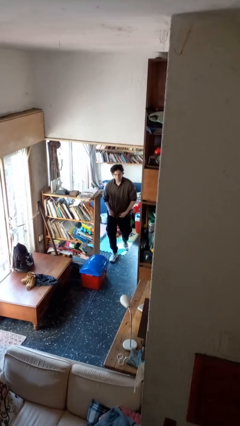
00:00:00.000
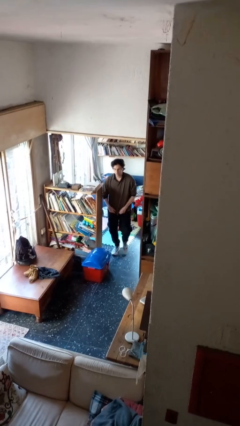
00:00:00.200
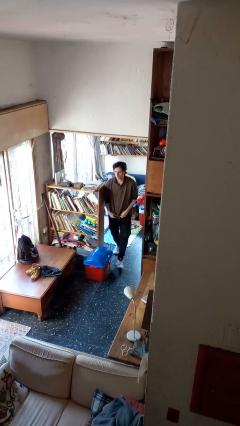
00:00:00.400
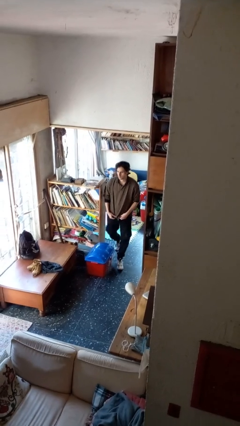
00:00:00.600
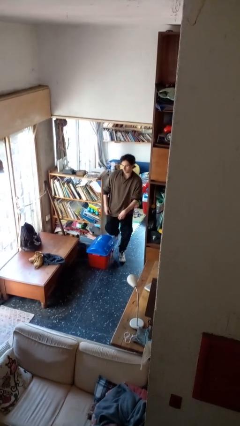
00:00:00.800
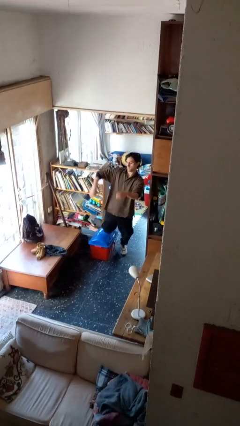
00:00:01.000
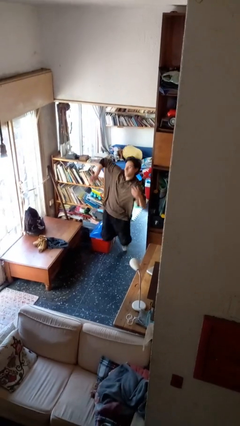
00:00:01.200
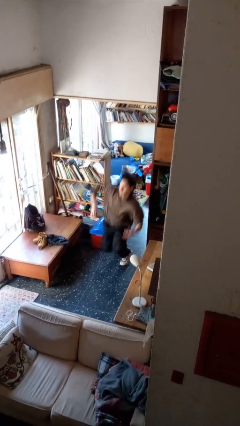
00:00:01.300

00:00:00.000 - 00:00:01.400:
person trips on object on floor

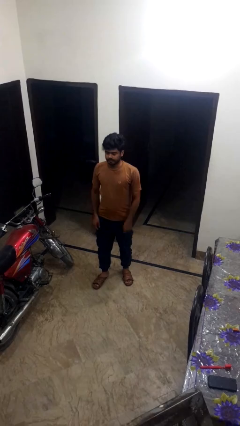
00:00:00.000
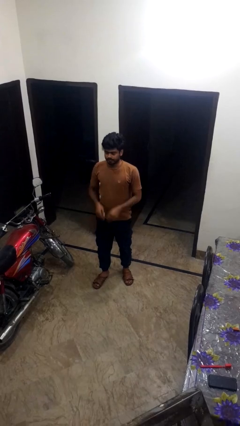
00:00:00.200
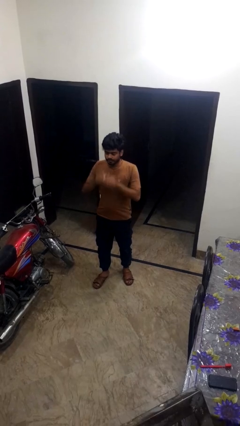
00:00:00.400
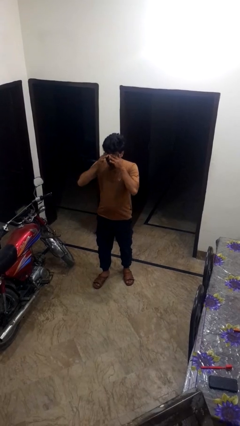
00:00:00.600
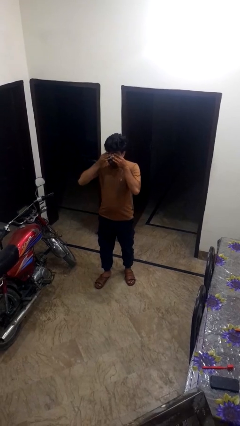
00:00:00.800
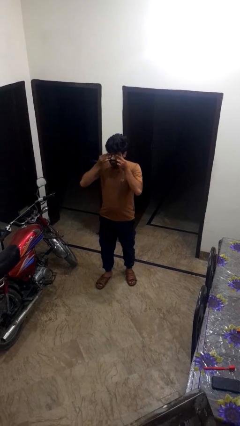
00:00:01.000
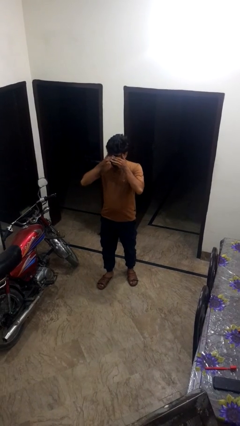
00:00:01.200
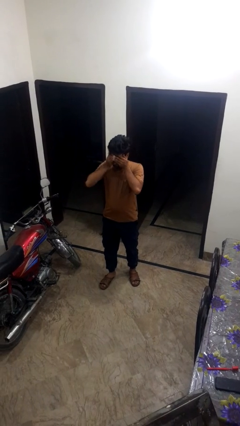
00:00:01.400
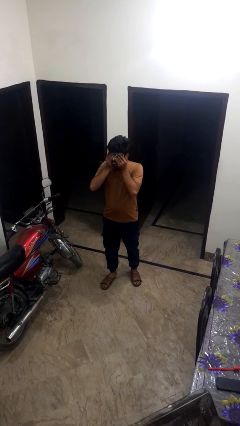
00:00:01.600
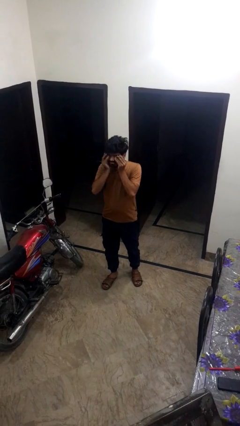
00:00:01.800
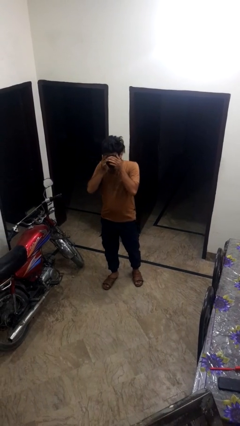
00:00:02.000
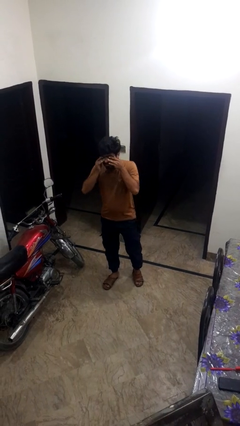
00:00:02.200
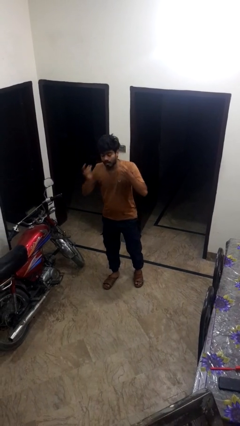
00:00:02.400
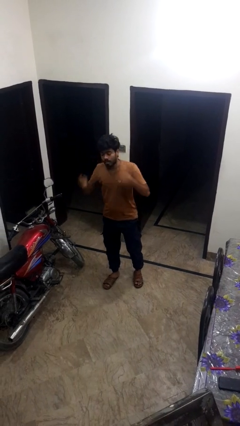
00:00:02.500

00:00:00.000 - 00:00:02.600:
person rubs eyes

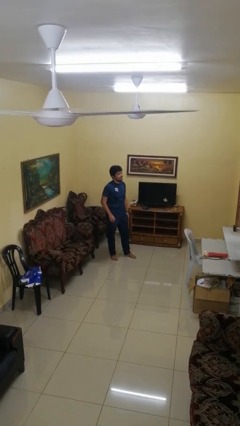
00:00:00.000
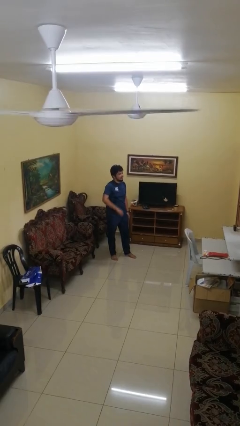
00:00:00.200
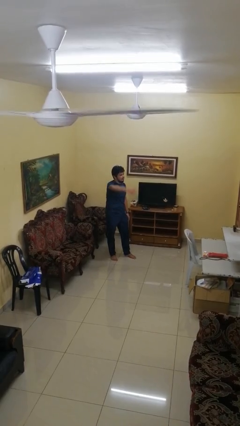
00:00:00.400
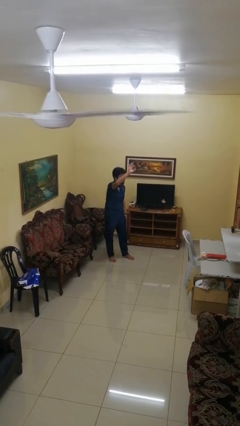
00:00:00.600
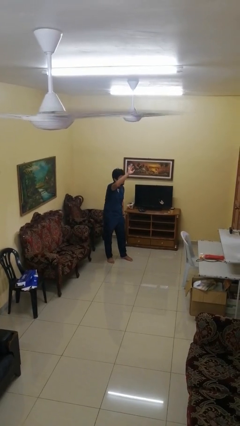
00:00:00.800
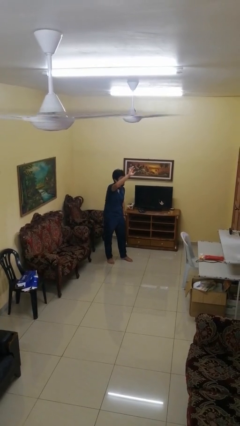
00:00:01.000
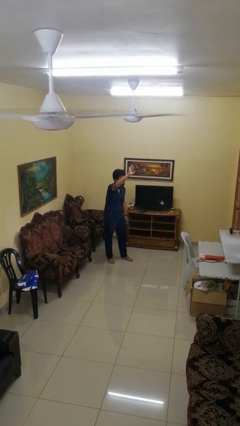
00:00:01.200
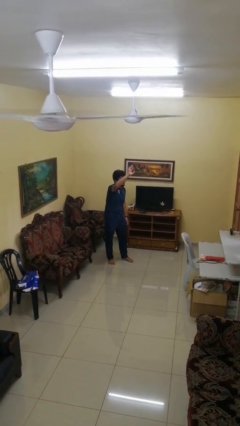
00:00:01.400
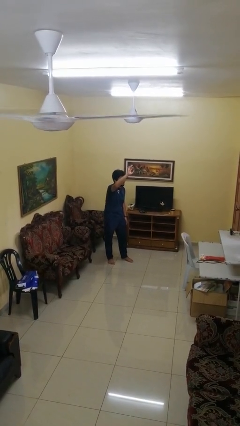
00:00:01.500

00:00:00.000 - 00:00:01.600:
person gestures swipe up

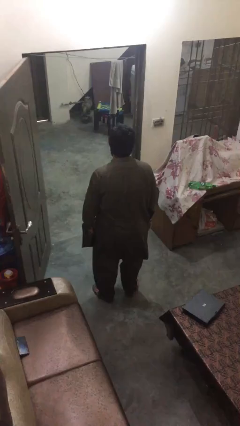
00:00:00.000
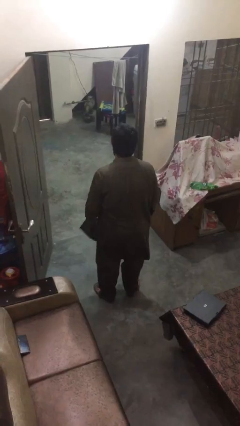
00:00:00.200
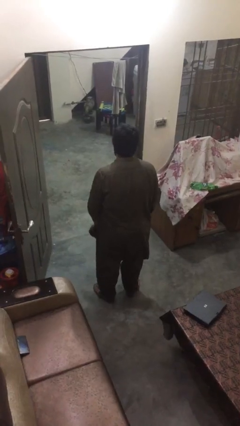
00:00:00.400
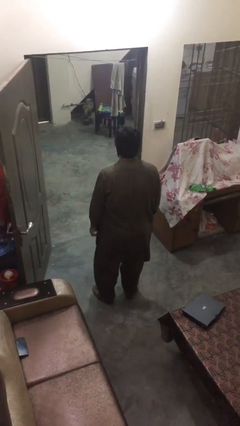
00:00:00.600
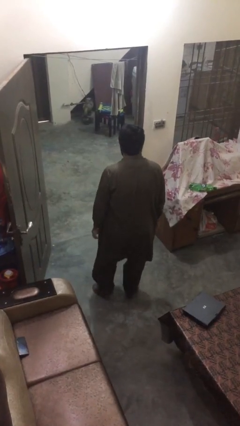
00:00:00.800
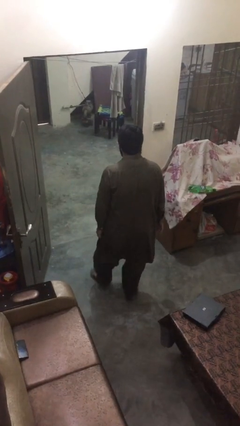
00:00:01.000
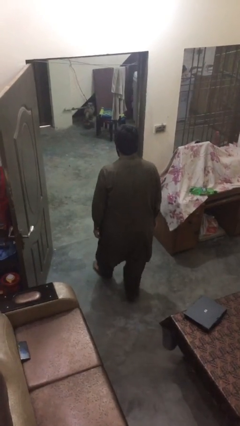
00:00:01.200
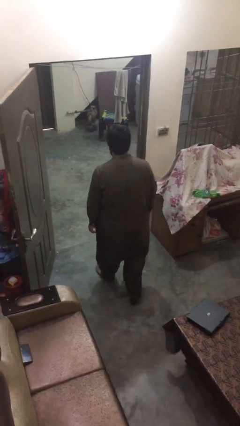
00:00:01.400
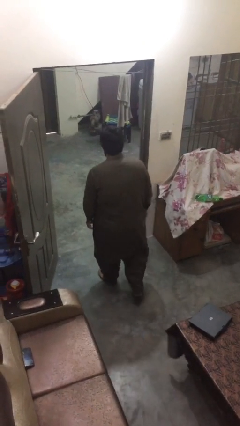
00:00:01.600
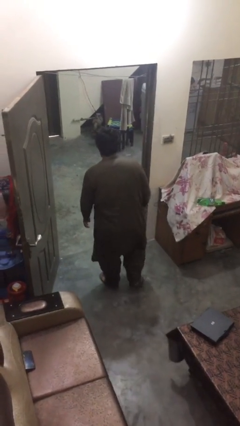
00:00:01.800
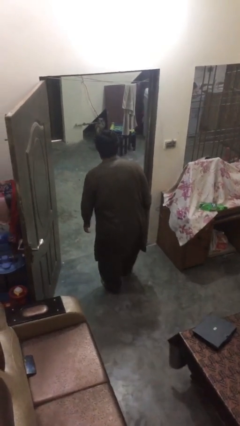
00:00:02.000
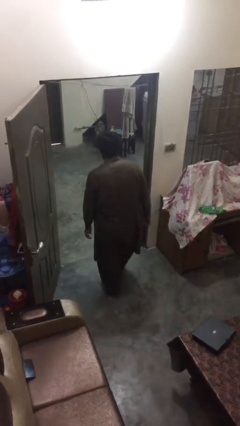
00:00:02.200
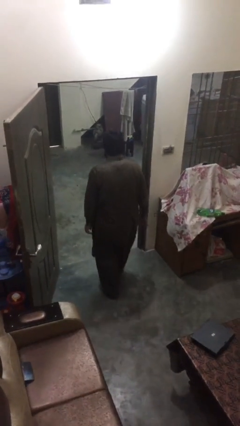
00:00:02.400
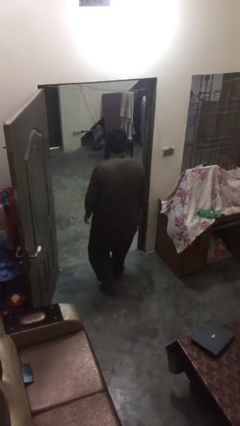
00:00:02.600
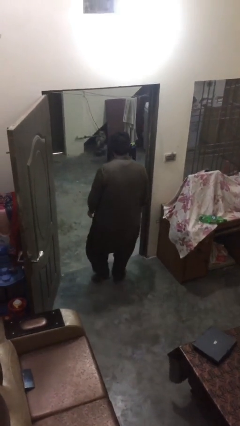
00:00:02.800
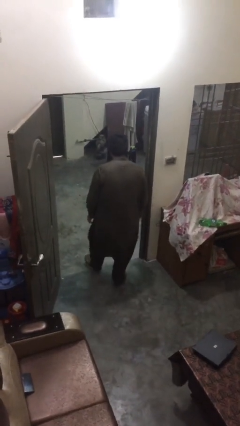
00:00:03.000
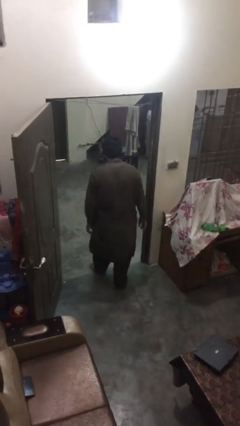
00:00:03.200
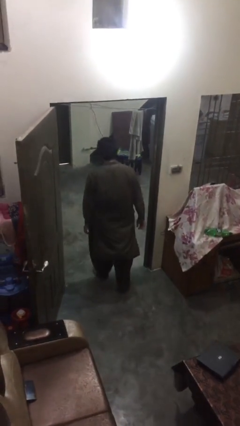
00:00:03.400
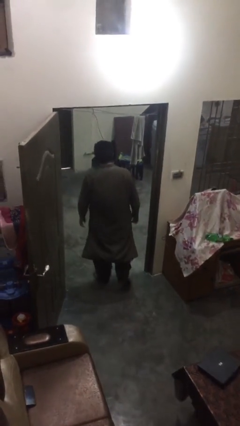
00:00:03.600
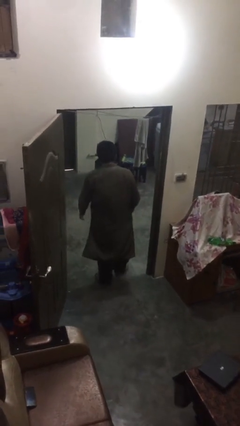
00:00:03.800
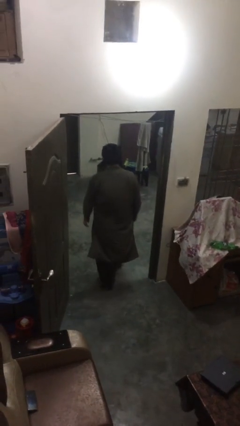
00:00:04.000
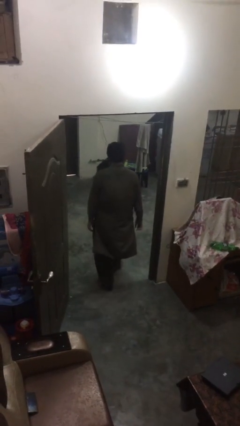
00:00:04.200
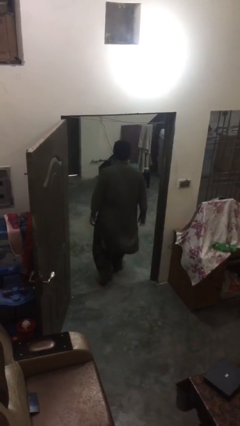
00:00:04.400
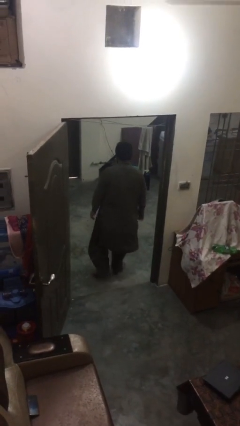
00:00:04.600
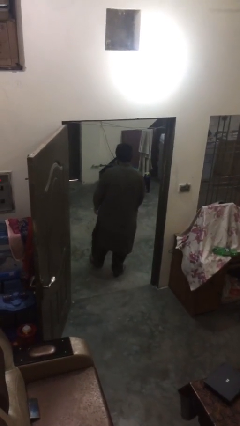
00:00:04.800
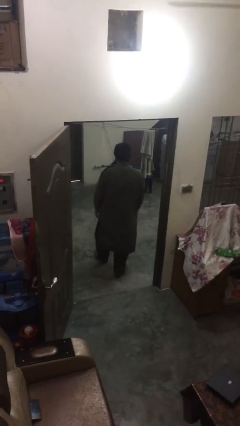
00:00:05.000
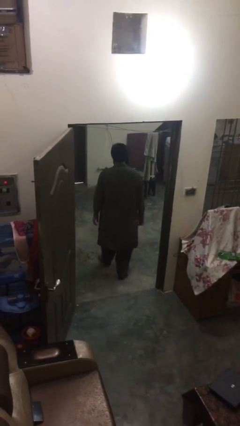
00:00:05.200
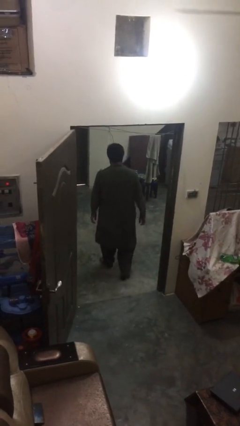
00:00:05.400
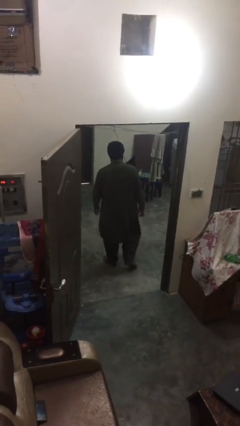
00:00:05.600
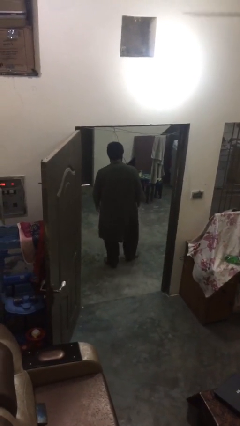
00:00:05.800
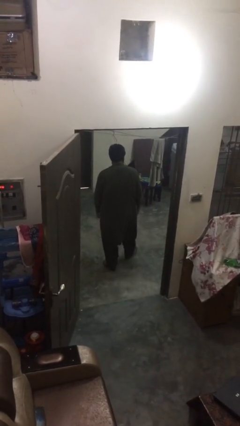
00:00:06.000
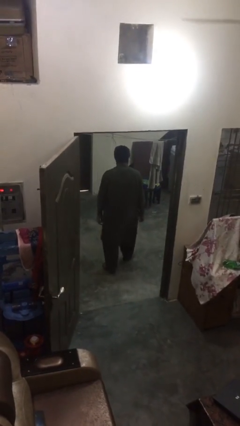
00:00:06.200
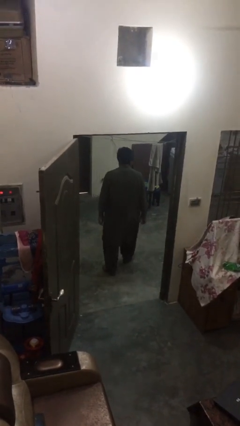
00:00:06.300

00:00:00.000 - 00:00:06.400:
person exits scene through structure

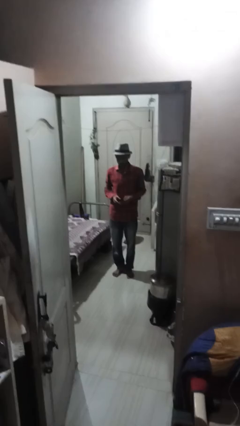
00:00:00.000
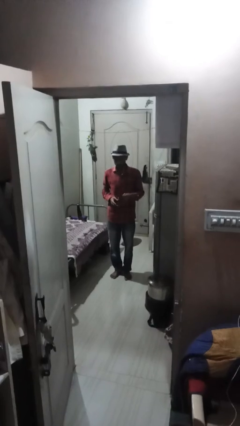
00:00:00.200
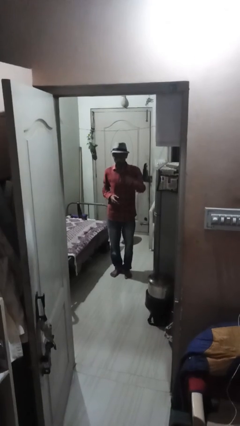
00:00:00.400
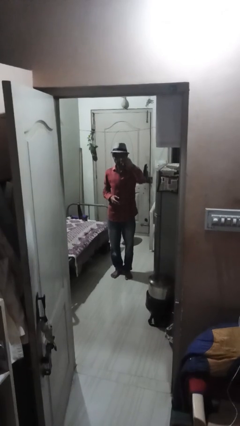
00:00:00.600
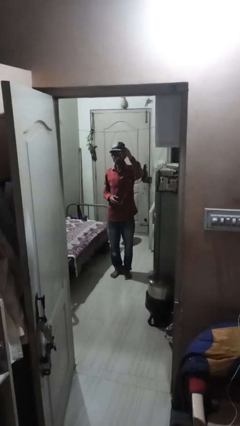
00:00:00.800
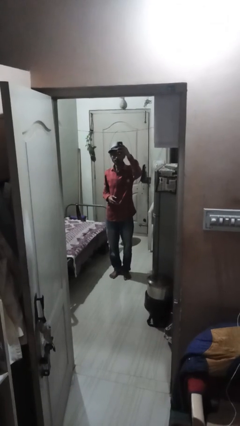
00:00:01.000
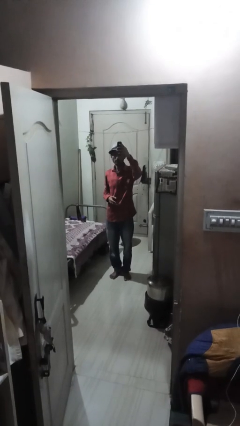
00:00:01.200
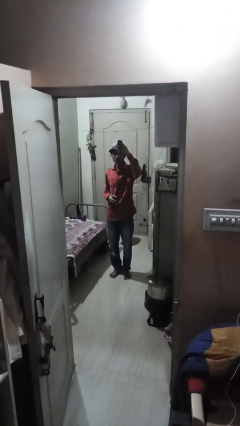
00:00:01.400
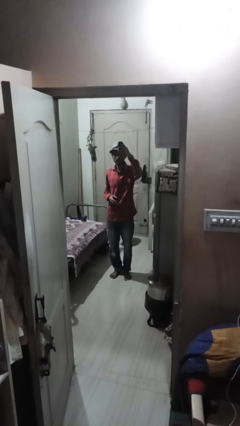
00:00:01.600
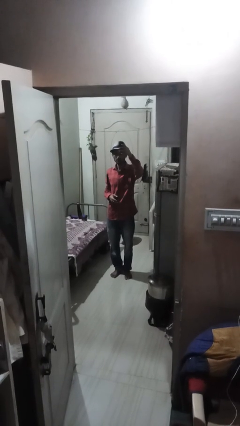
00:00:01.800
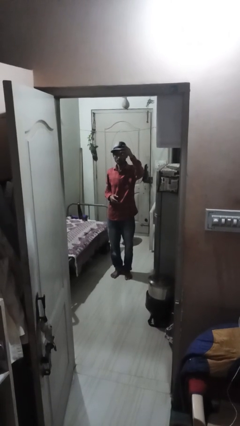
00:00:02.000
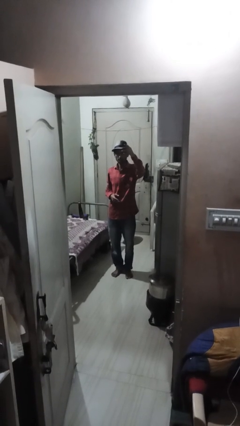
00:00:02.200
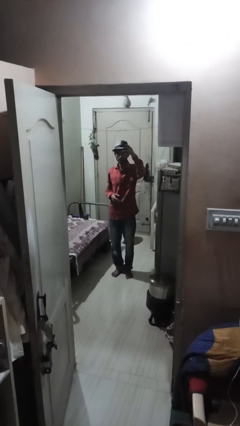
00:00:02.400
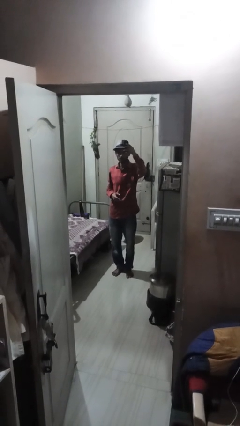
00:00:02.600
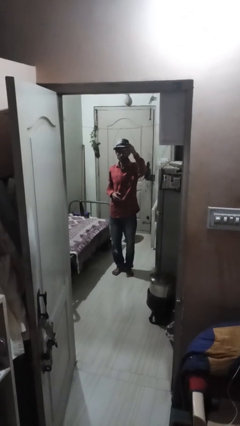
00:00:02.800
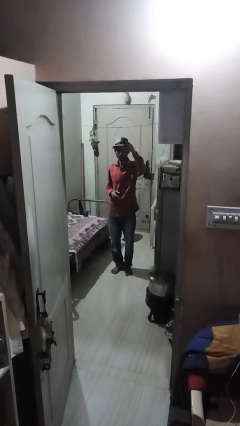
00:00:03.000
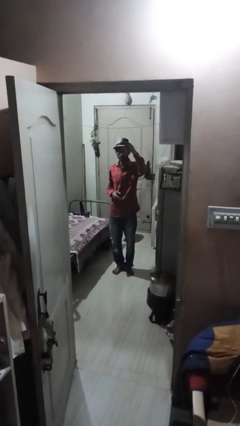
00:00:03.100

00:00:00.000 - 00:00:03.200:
person takes selfie

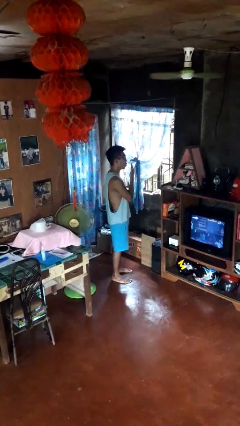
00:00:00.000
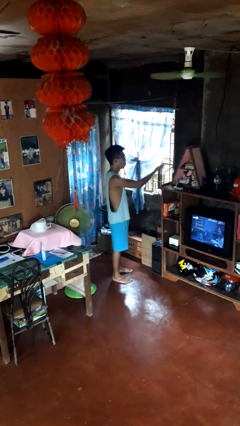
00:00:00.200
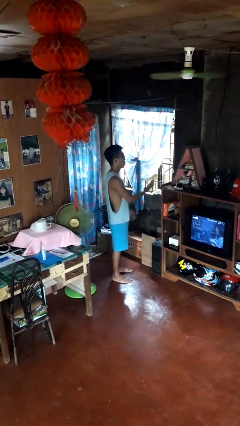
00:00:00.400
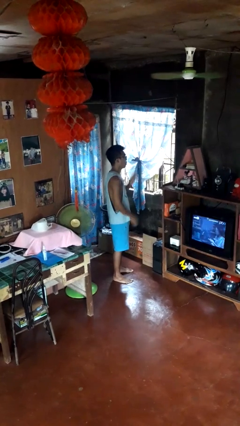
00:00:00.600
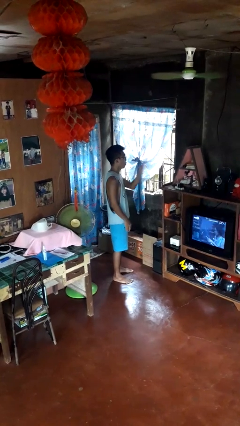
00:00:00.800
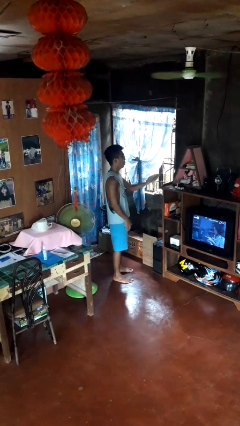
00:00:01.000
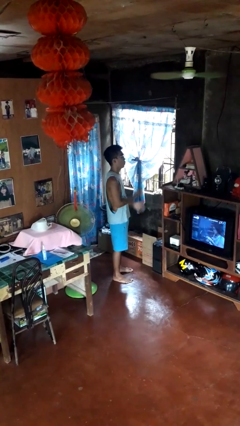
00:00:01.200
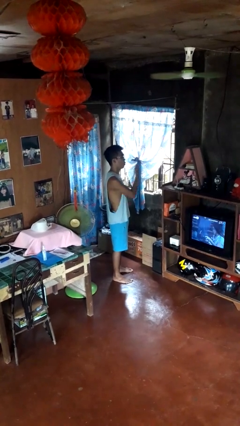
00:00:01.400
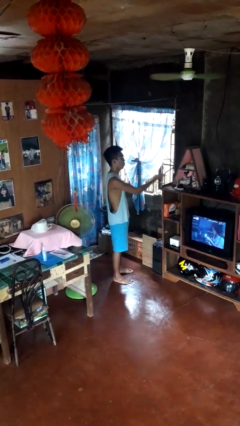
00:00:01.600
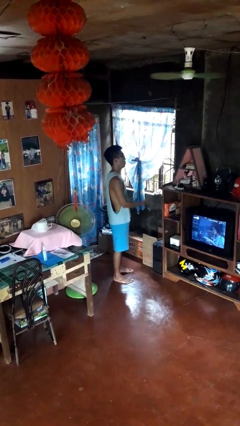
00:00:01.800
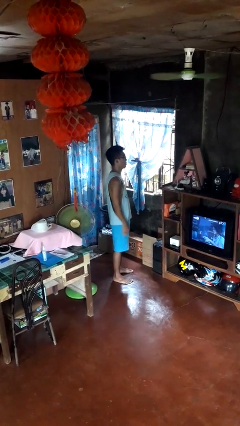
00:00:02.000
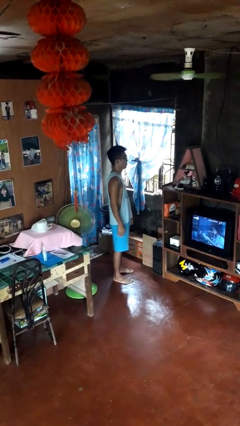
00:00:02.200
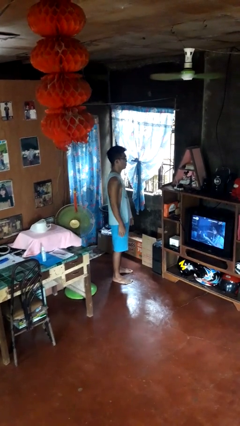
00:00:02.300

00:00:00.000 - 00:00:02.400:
person gestures blow kiss
